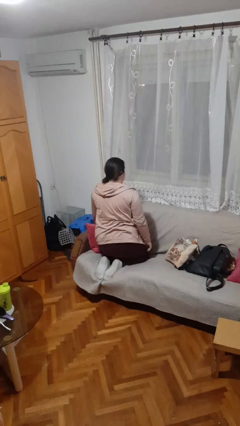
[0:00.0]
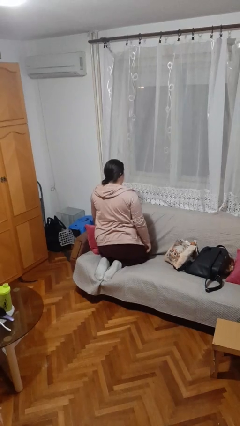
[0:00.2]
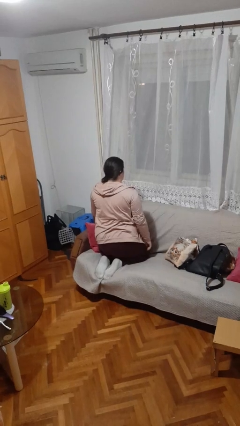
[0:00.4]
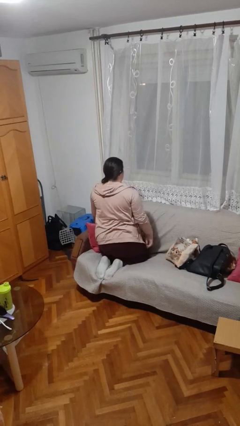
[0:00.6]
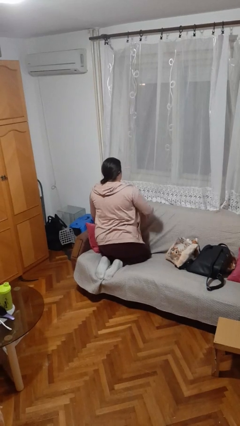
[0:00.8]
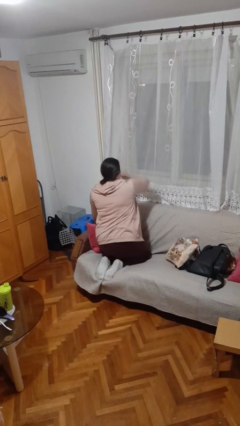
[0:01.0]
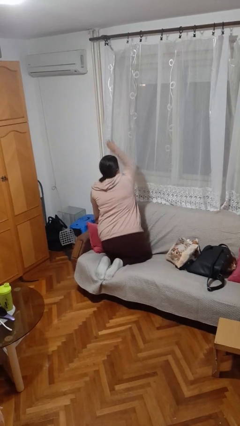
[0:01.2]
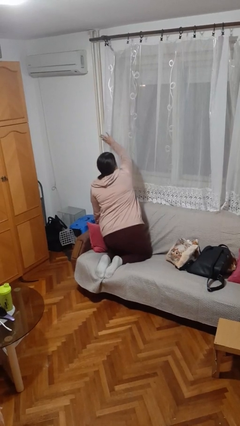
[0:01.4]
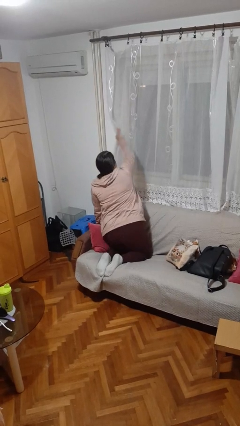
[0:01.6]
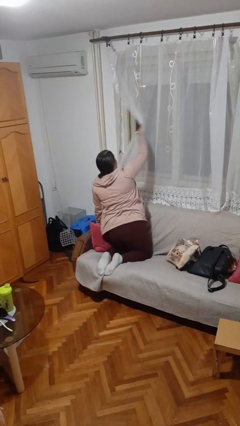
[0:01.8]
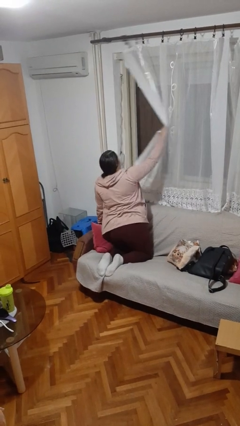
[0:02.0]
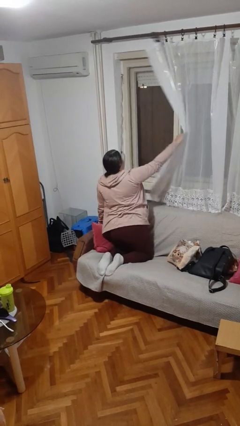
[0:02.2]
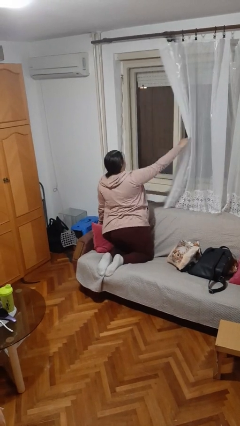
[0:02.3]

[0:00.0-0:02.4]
person opens curtains

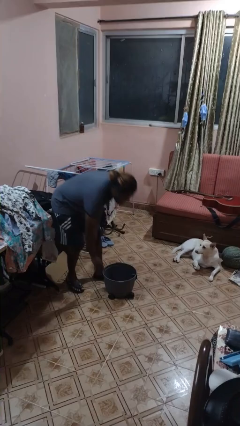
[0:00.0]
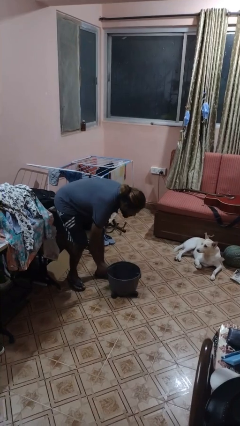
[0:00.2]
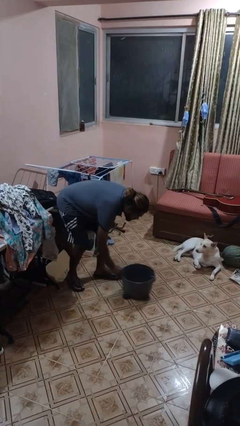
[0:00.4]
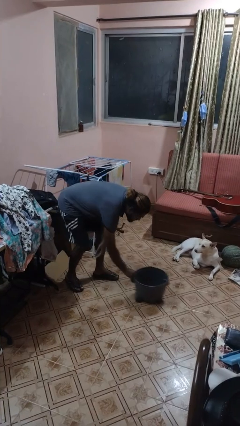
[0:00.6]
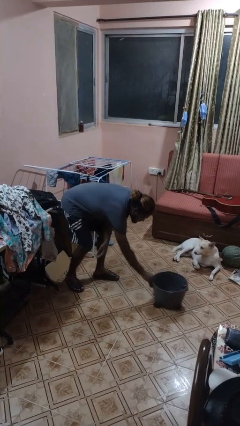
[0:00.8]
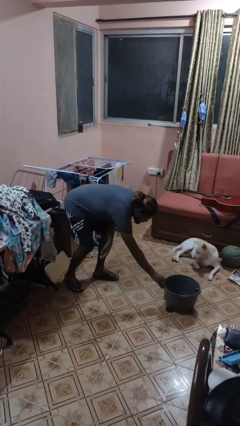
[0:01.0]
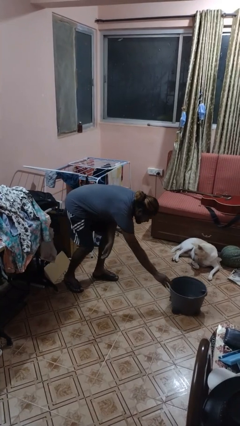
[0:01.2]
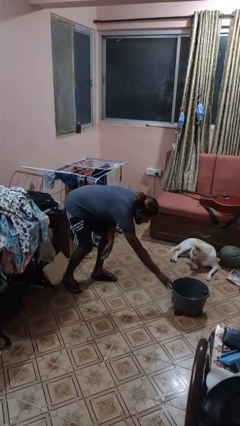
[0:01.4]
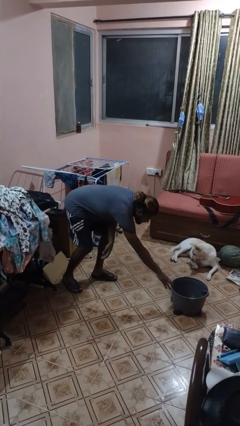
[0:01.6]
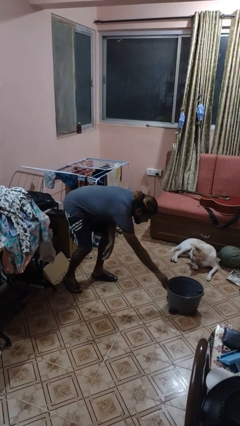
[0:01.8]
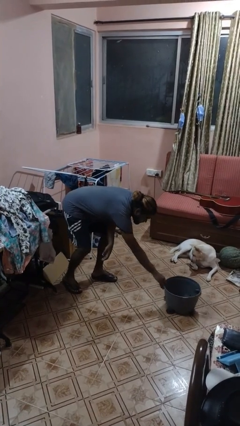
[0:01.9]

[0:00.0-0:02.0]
person pushes wheeled cart

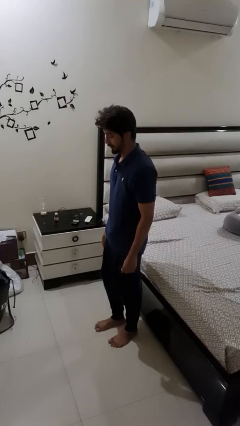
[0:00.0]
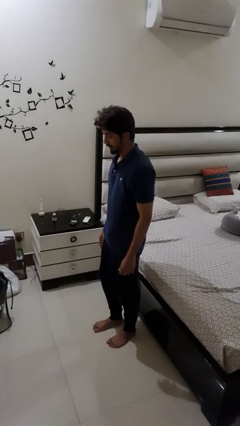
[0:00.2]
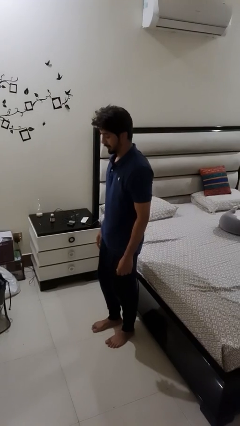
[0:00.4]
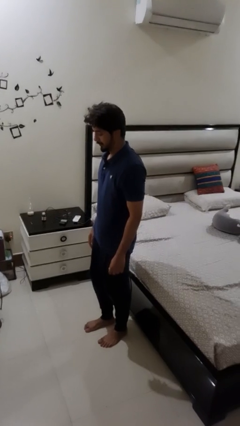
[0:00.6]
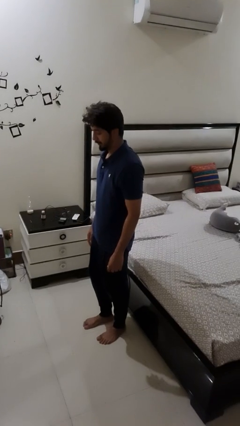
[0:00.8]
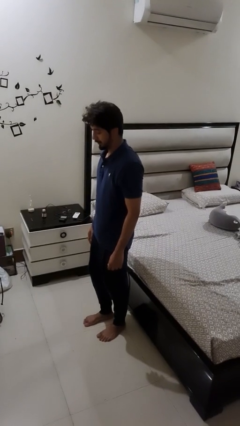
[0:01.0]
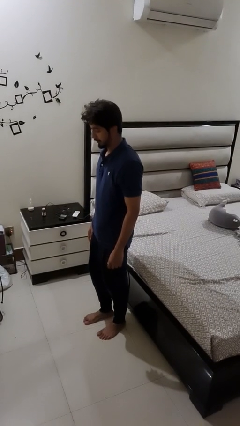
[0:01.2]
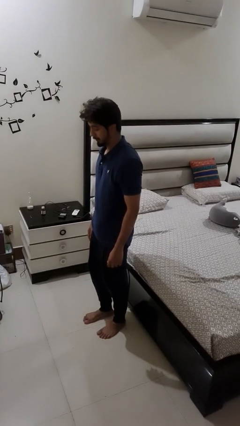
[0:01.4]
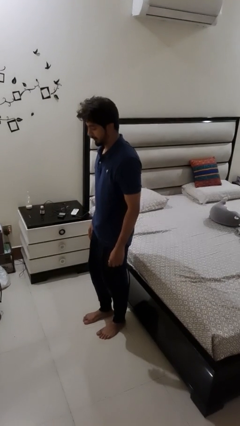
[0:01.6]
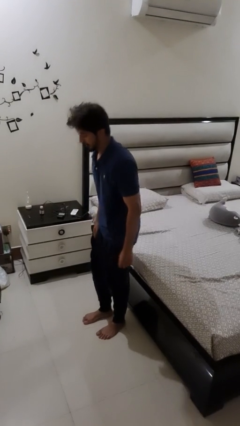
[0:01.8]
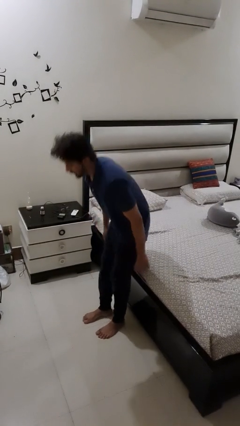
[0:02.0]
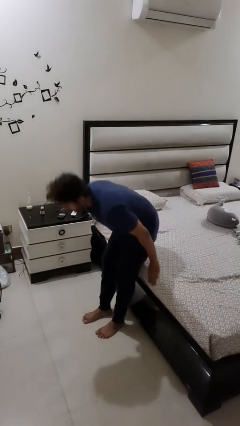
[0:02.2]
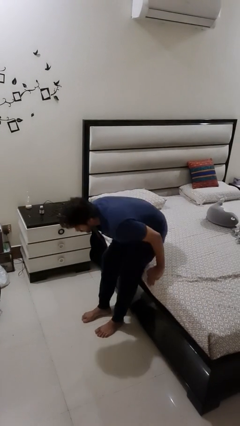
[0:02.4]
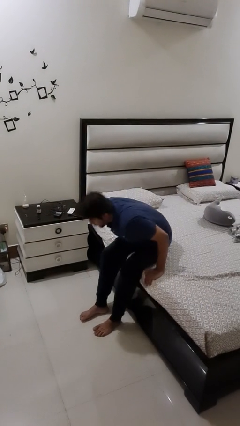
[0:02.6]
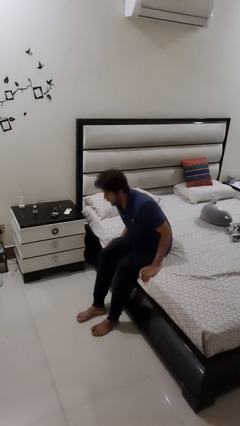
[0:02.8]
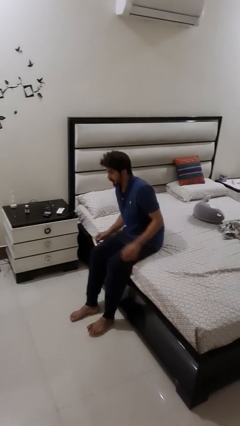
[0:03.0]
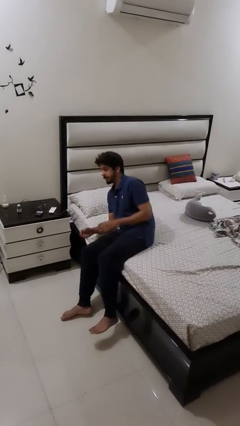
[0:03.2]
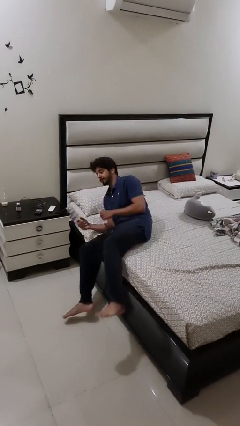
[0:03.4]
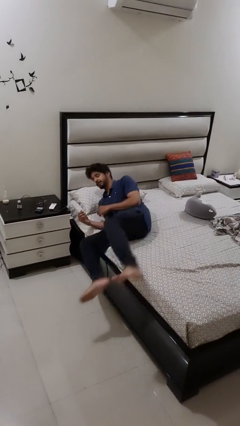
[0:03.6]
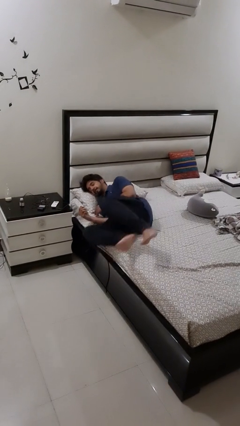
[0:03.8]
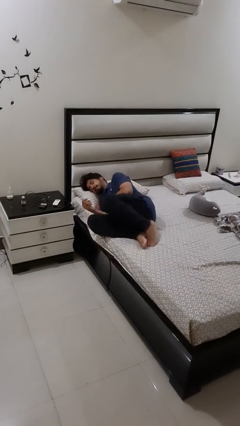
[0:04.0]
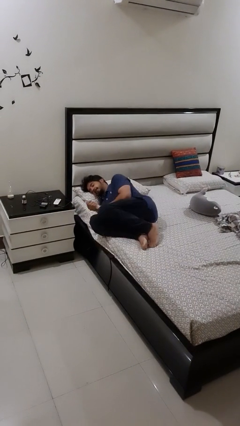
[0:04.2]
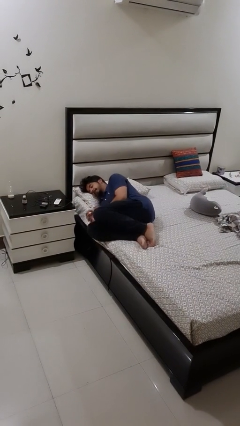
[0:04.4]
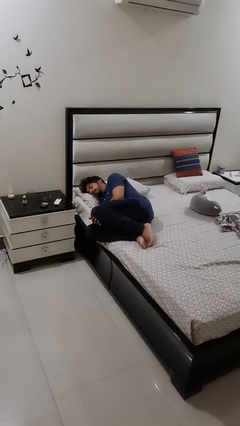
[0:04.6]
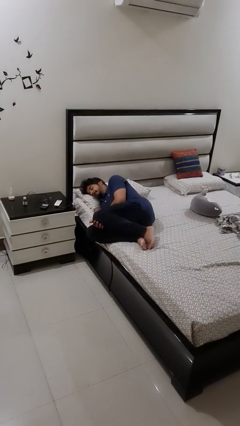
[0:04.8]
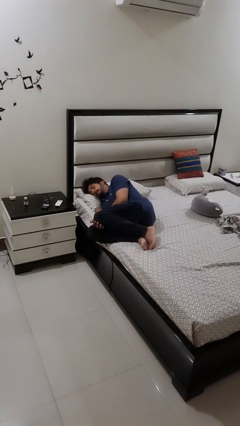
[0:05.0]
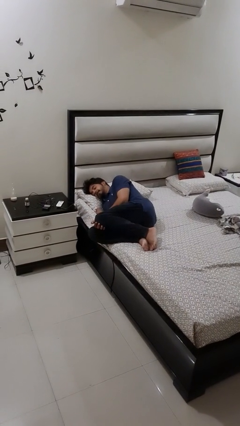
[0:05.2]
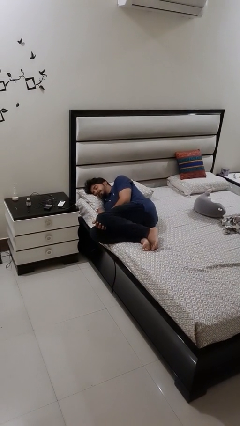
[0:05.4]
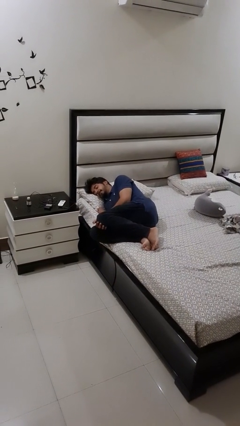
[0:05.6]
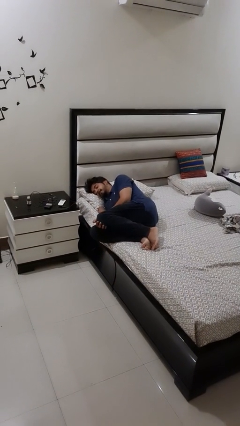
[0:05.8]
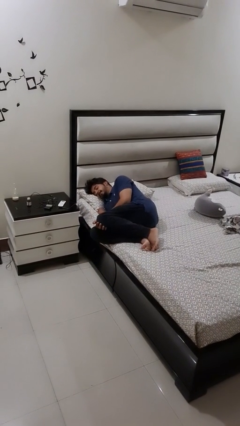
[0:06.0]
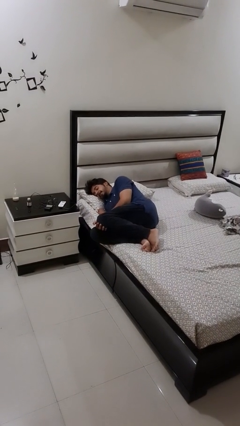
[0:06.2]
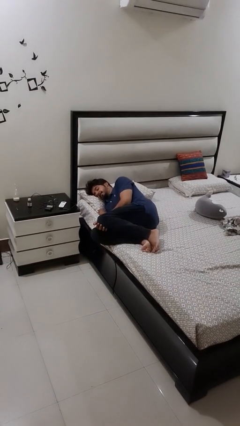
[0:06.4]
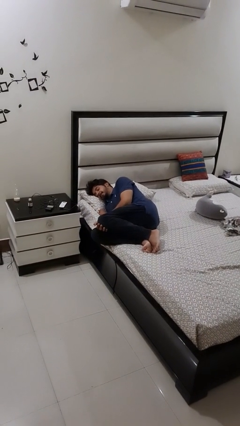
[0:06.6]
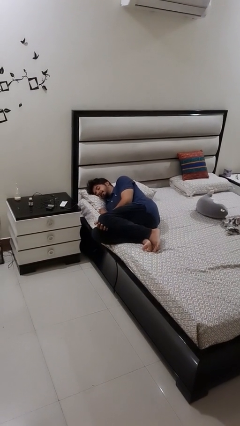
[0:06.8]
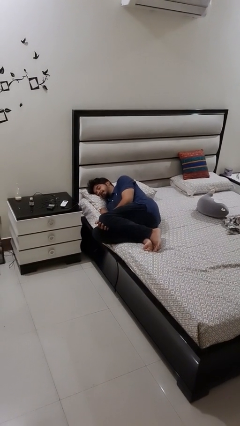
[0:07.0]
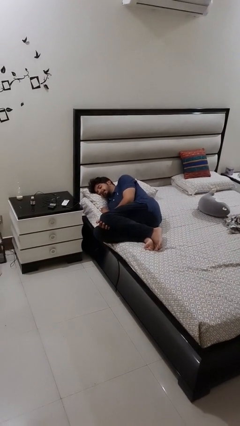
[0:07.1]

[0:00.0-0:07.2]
person lies down on bed

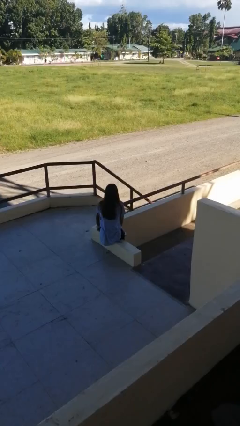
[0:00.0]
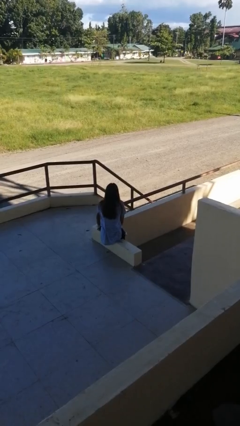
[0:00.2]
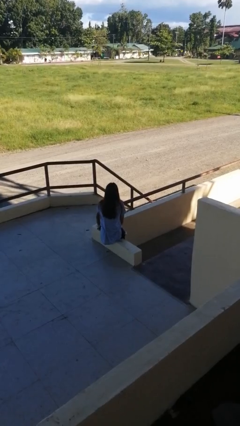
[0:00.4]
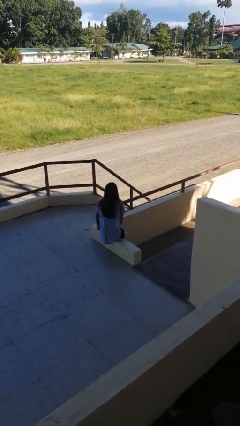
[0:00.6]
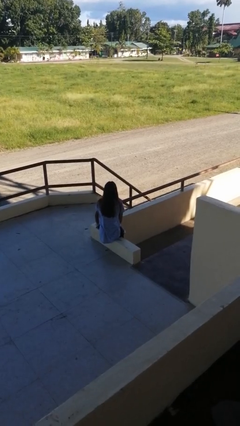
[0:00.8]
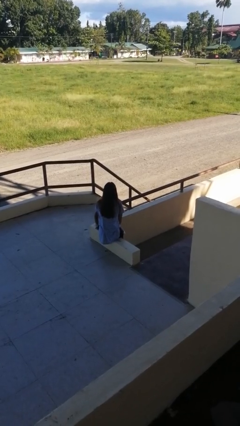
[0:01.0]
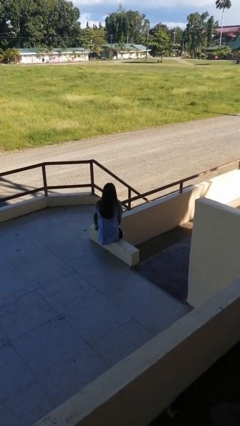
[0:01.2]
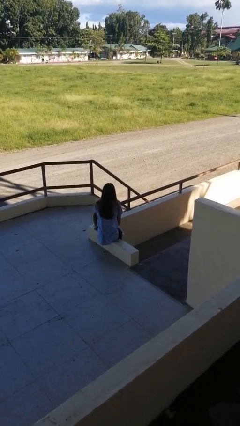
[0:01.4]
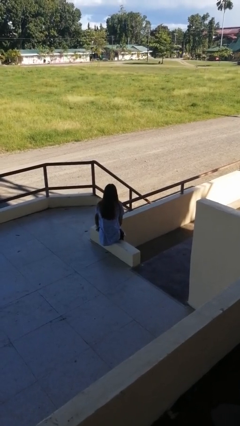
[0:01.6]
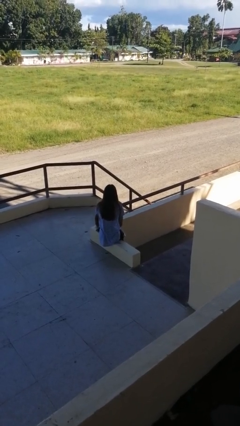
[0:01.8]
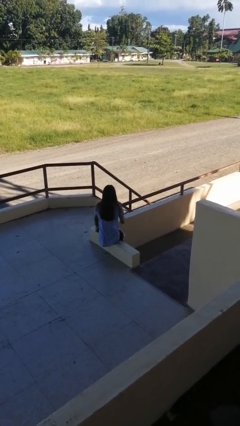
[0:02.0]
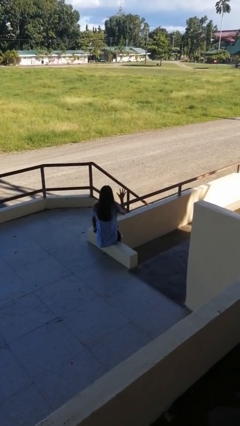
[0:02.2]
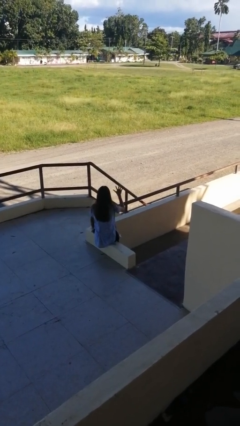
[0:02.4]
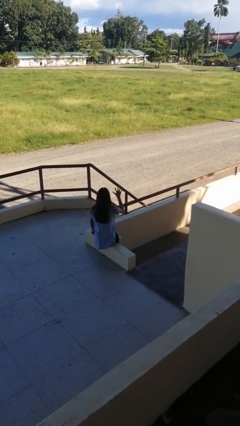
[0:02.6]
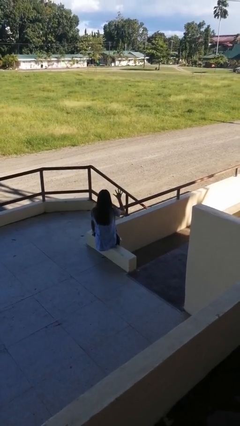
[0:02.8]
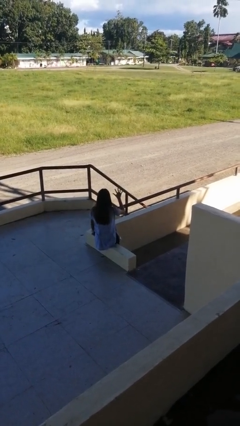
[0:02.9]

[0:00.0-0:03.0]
person gestures number five

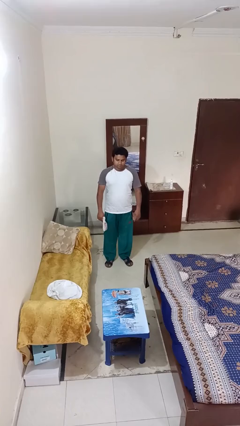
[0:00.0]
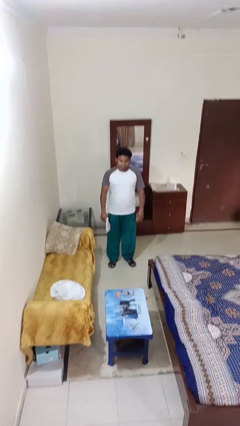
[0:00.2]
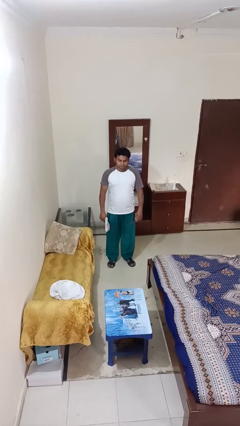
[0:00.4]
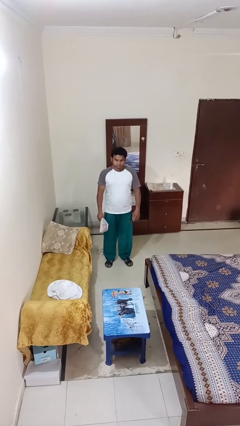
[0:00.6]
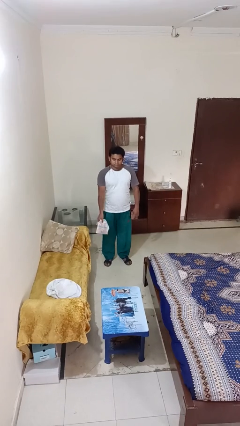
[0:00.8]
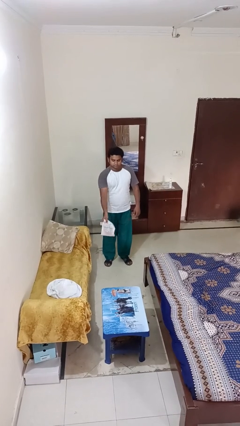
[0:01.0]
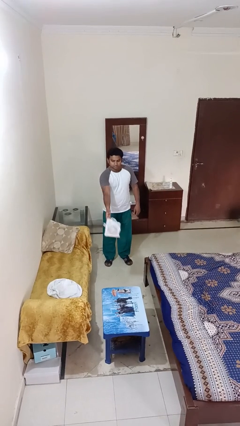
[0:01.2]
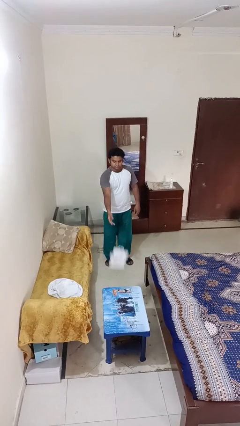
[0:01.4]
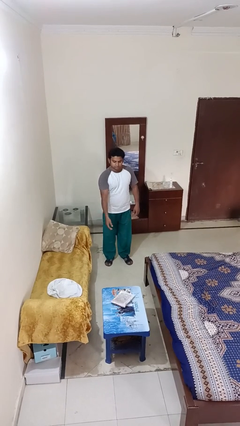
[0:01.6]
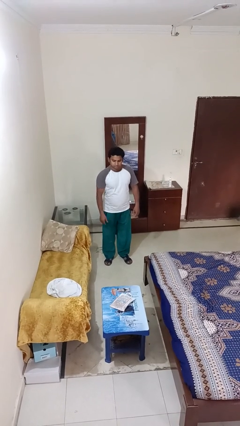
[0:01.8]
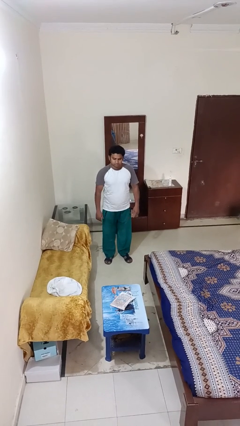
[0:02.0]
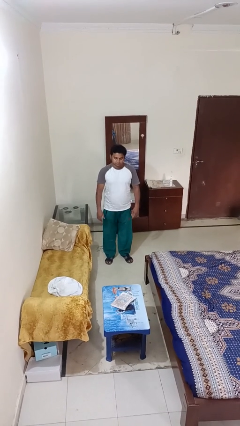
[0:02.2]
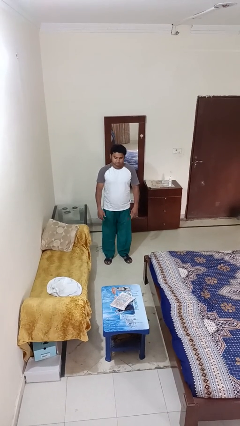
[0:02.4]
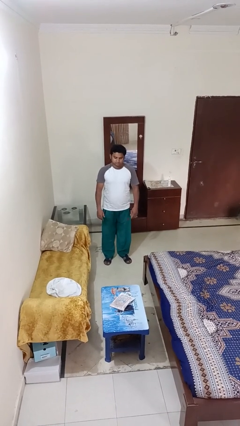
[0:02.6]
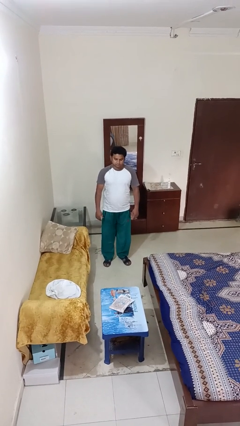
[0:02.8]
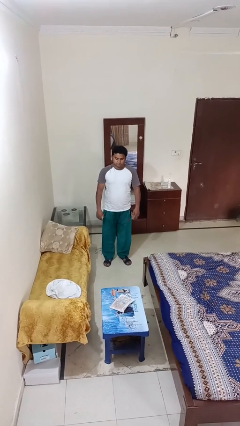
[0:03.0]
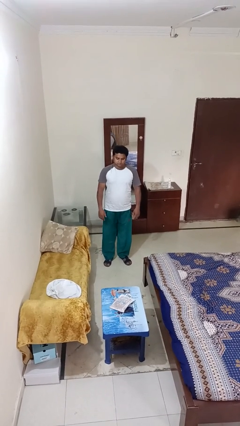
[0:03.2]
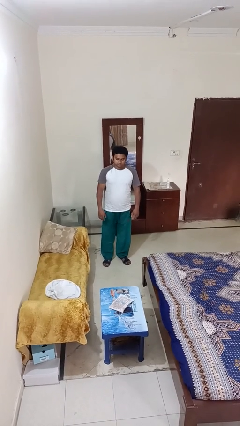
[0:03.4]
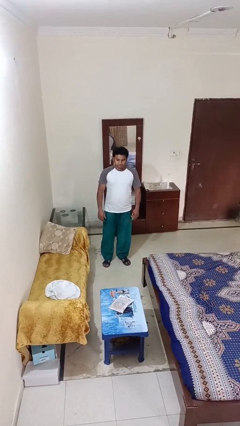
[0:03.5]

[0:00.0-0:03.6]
person throws object on table
